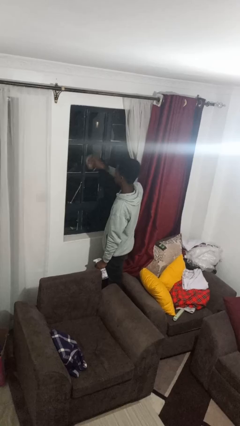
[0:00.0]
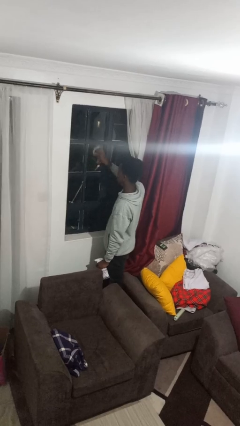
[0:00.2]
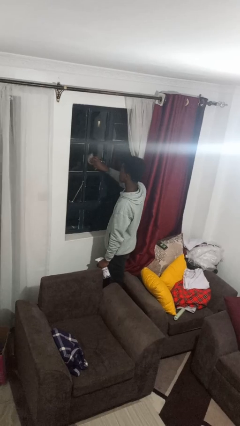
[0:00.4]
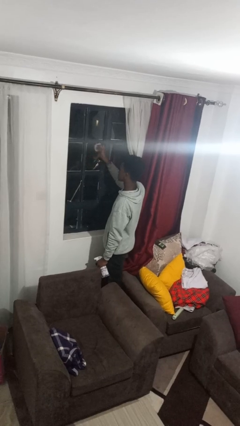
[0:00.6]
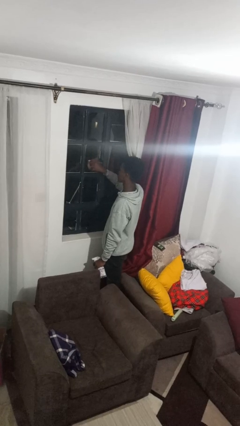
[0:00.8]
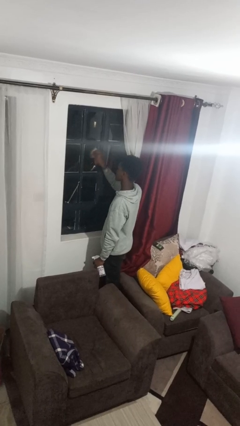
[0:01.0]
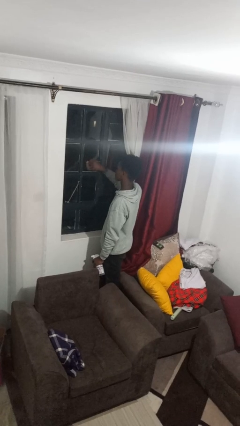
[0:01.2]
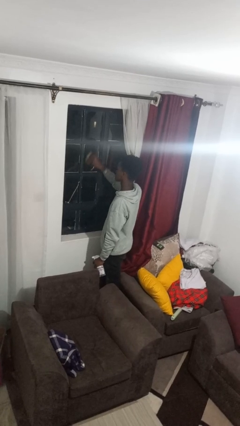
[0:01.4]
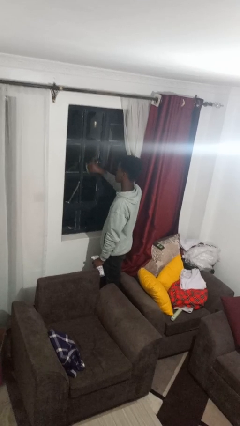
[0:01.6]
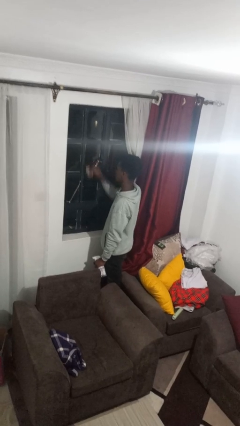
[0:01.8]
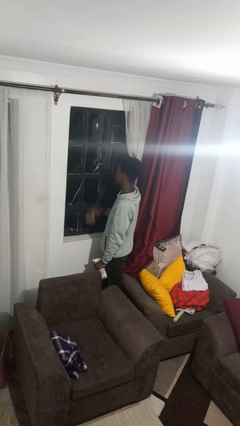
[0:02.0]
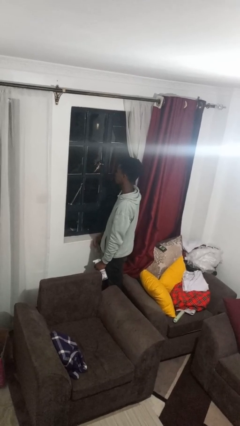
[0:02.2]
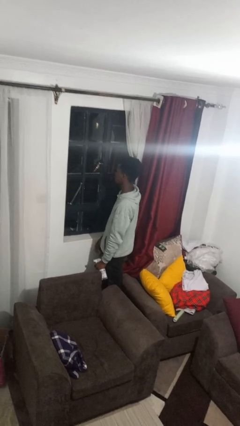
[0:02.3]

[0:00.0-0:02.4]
person washes window

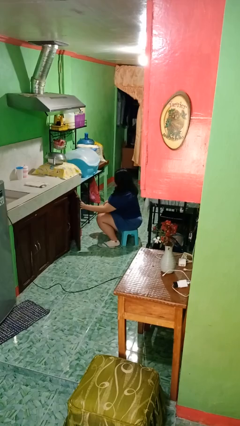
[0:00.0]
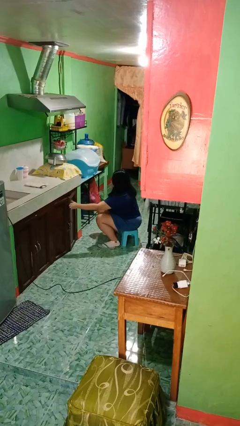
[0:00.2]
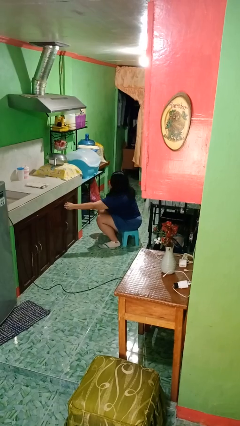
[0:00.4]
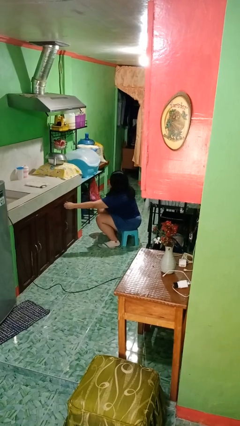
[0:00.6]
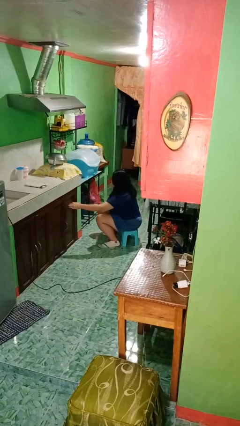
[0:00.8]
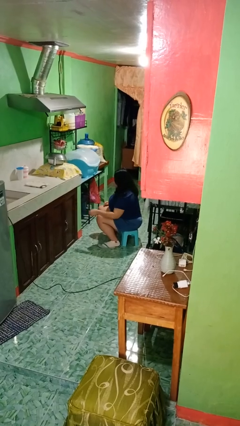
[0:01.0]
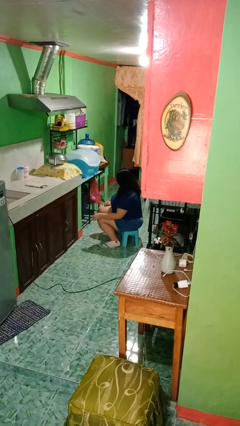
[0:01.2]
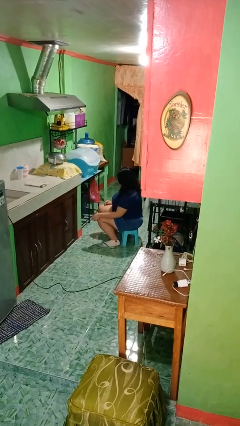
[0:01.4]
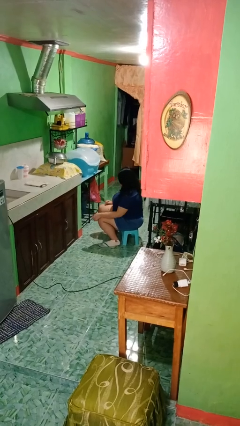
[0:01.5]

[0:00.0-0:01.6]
person closes cabinet

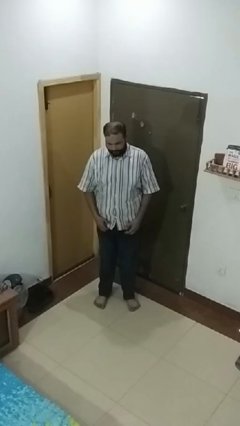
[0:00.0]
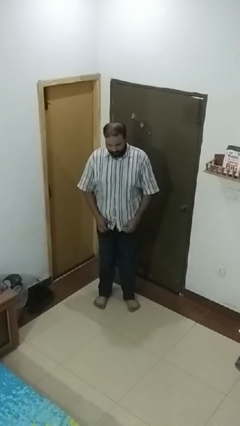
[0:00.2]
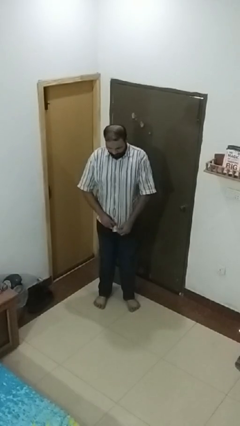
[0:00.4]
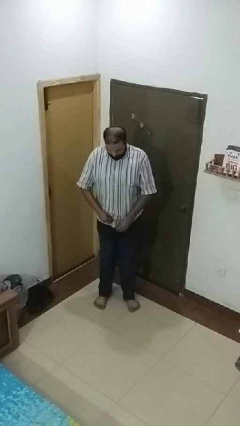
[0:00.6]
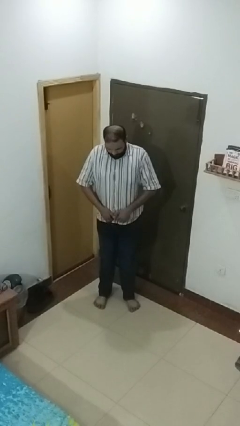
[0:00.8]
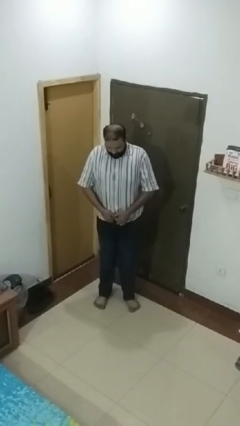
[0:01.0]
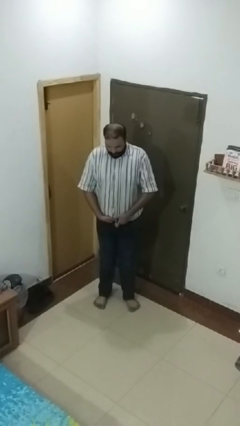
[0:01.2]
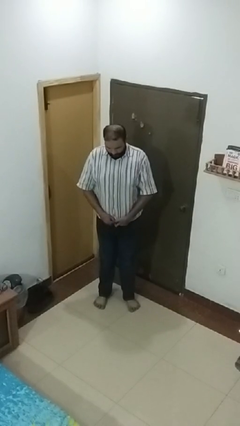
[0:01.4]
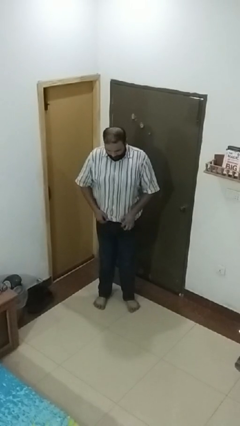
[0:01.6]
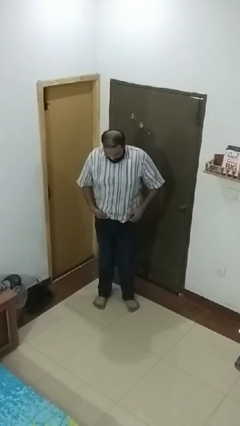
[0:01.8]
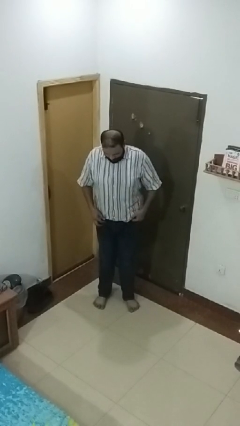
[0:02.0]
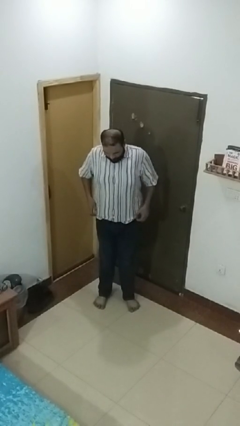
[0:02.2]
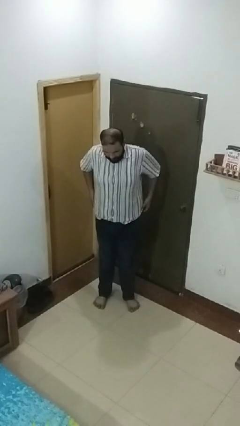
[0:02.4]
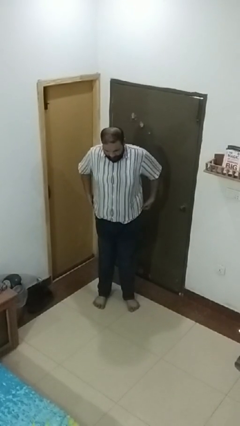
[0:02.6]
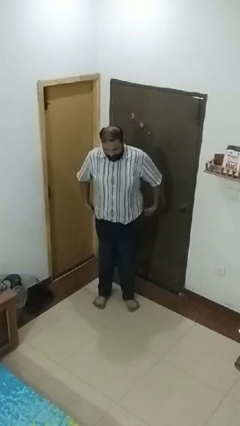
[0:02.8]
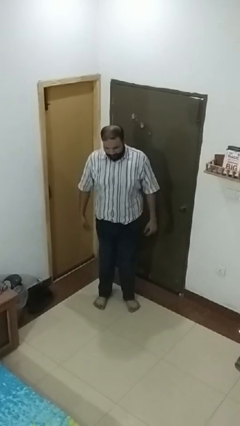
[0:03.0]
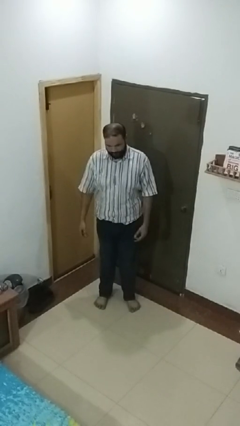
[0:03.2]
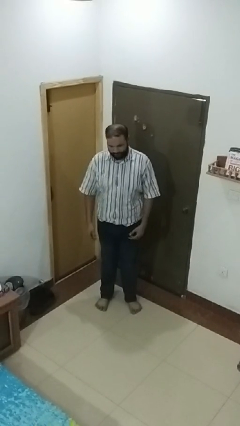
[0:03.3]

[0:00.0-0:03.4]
person tucks in shirt

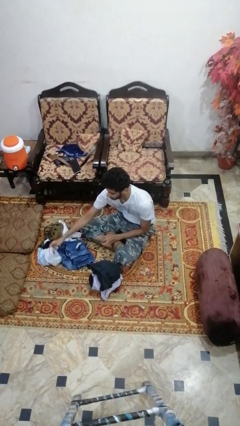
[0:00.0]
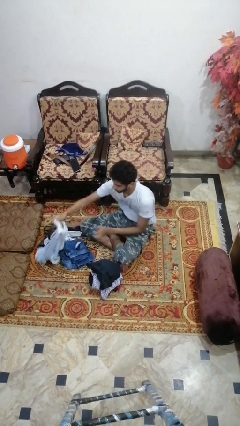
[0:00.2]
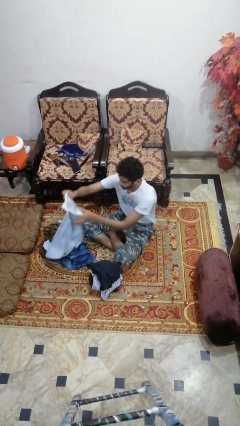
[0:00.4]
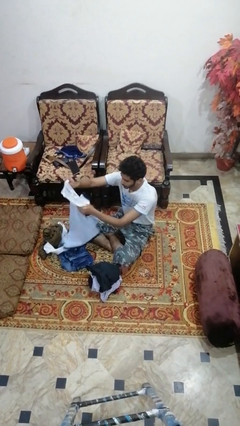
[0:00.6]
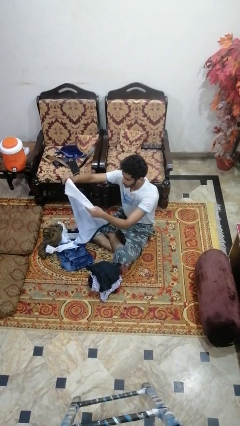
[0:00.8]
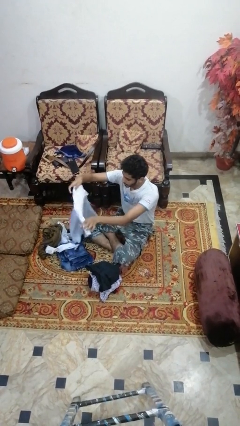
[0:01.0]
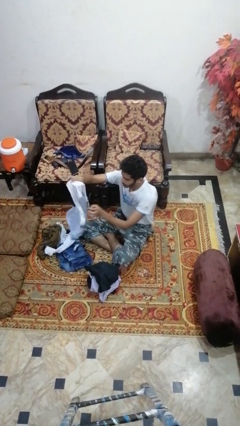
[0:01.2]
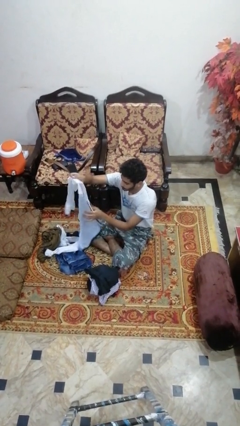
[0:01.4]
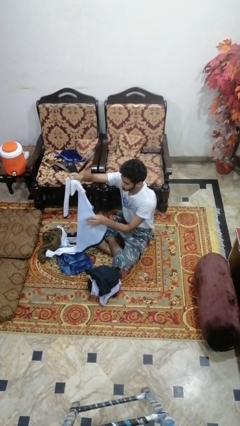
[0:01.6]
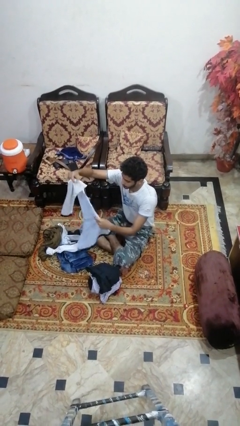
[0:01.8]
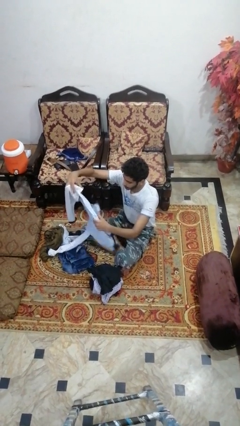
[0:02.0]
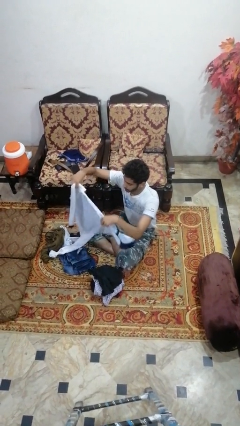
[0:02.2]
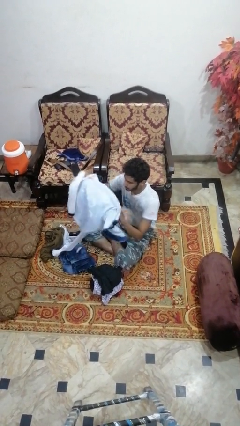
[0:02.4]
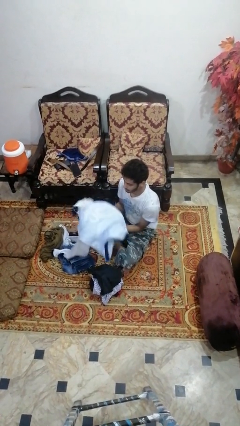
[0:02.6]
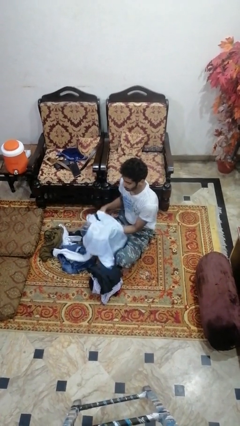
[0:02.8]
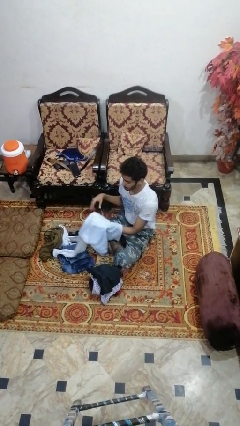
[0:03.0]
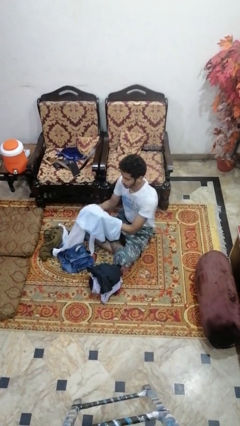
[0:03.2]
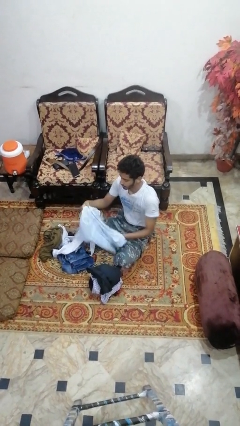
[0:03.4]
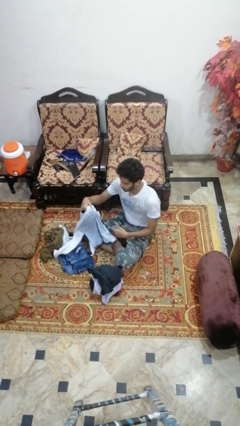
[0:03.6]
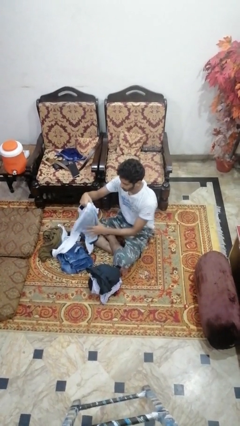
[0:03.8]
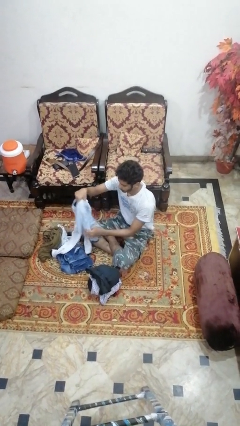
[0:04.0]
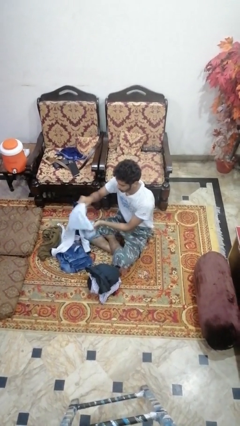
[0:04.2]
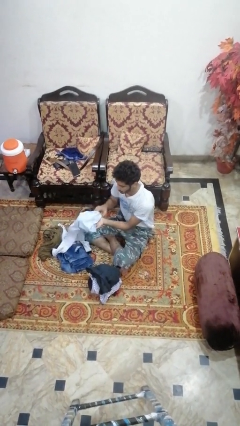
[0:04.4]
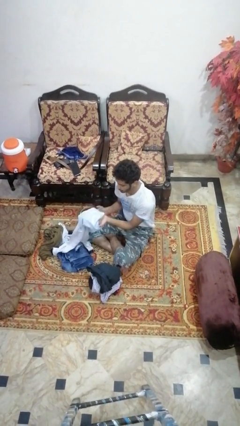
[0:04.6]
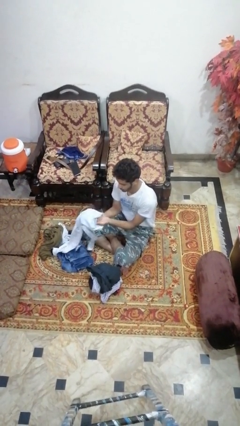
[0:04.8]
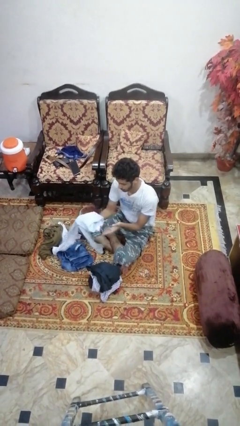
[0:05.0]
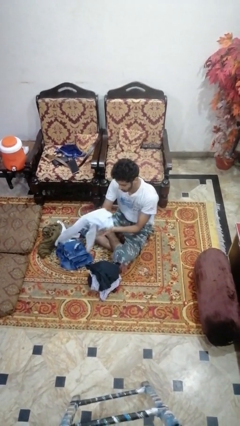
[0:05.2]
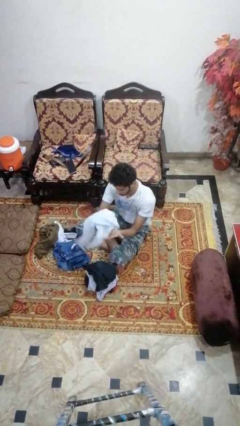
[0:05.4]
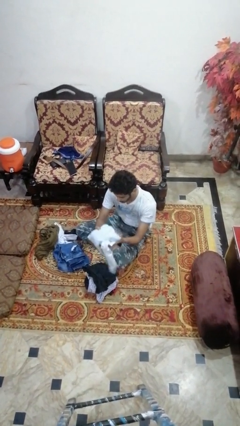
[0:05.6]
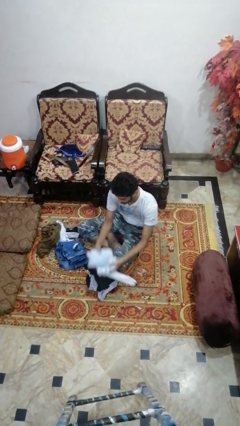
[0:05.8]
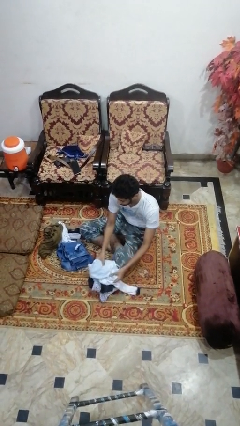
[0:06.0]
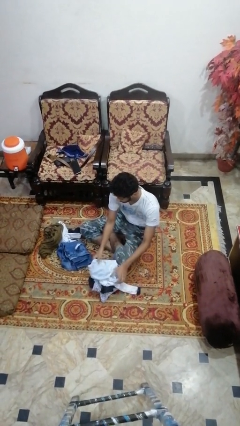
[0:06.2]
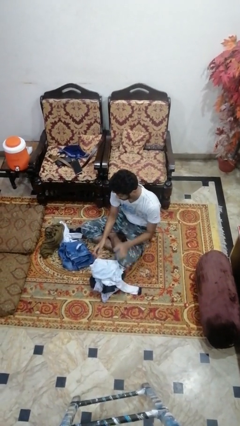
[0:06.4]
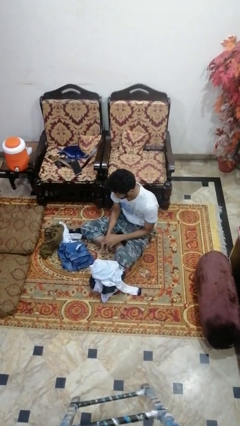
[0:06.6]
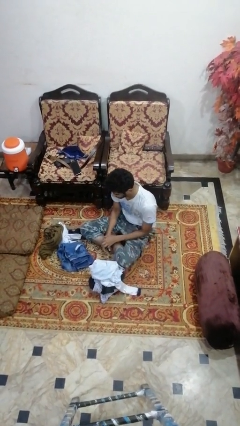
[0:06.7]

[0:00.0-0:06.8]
person folds shirt

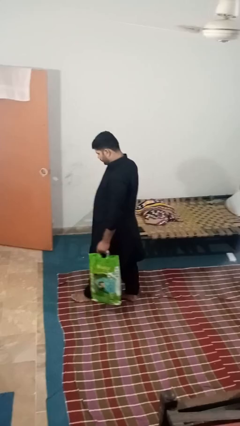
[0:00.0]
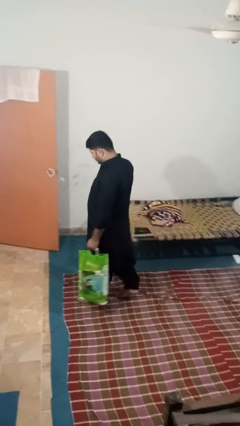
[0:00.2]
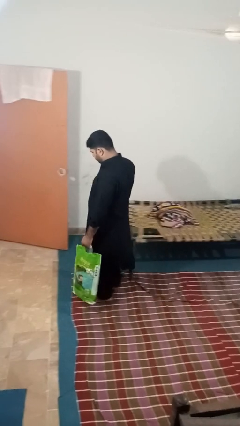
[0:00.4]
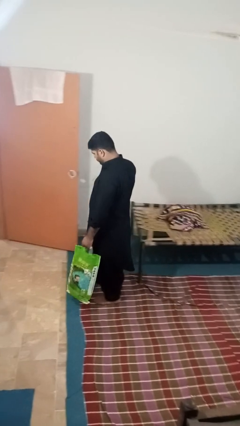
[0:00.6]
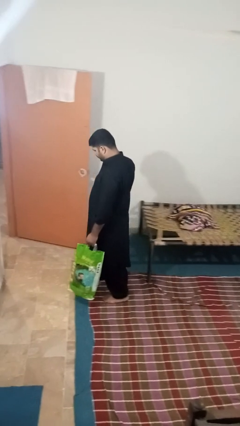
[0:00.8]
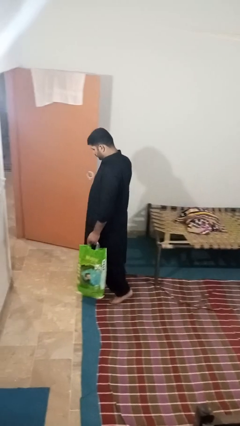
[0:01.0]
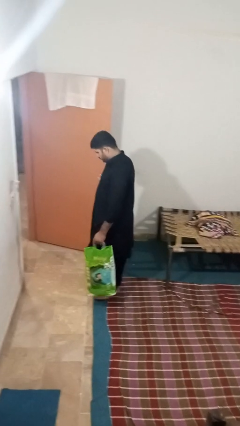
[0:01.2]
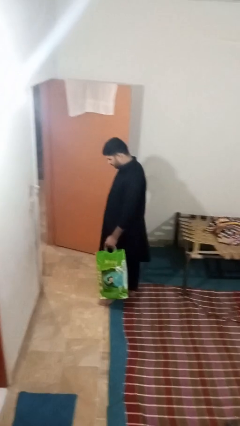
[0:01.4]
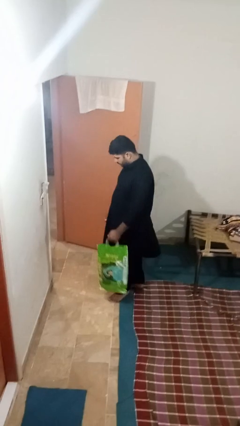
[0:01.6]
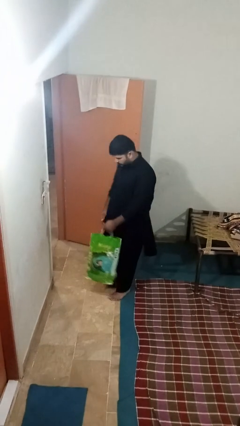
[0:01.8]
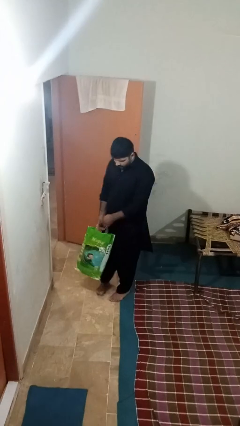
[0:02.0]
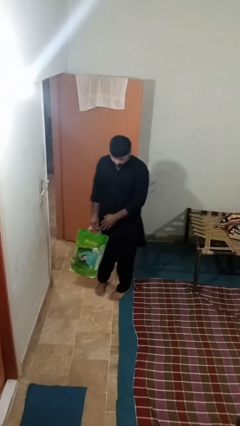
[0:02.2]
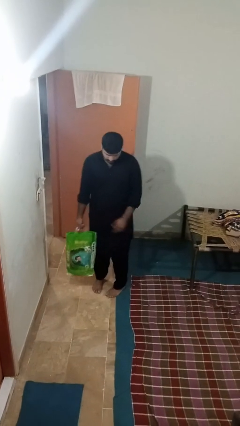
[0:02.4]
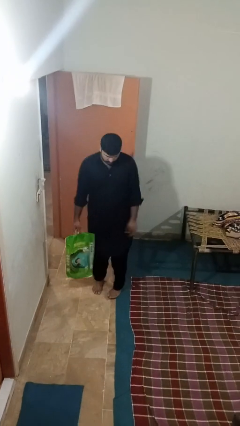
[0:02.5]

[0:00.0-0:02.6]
person carries groceries

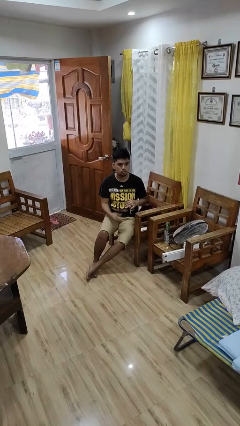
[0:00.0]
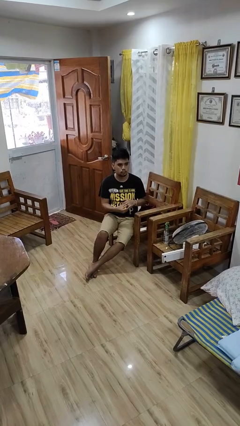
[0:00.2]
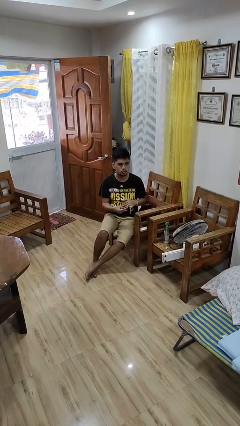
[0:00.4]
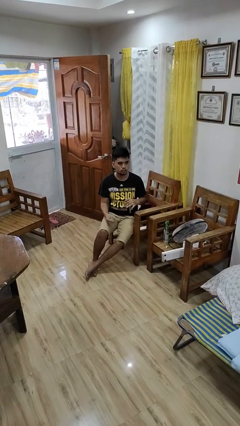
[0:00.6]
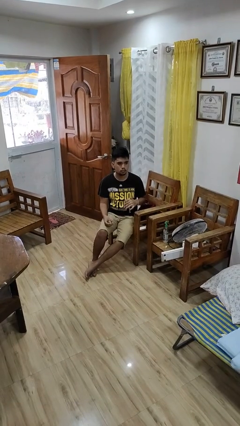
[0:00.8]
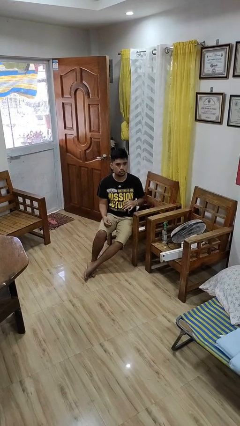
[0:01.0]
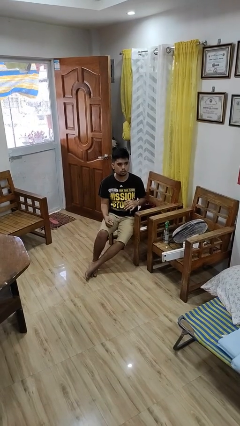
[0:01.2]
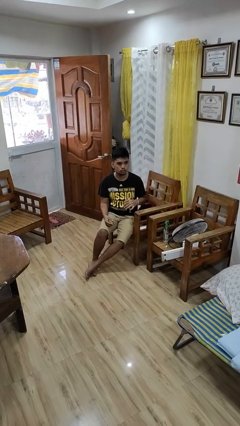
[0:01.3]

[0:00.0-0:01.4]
person takes off ring
